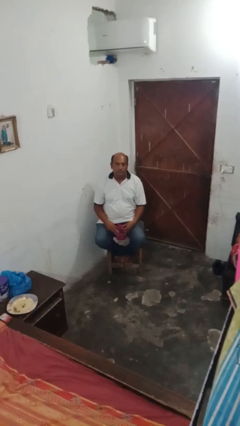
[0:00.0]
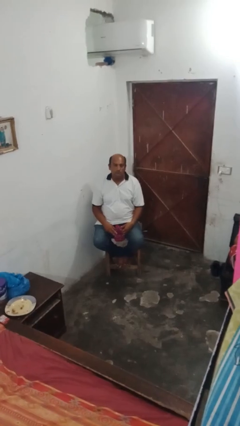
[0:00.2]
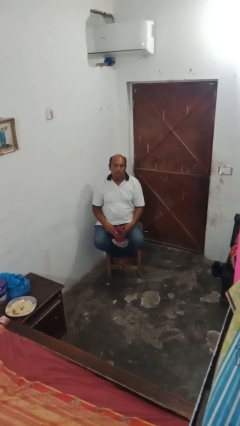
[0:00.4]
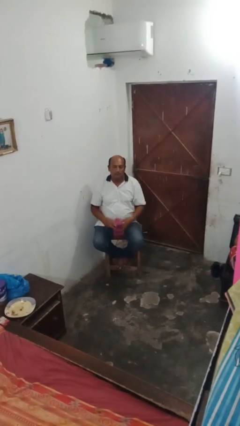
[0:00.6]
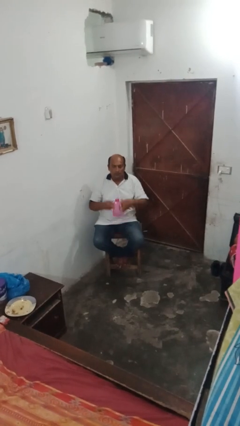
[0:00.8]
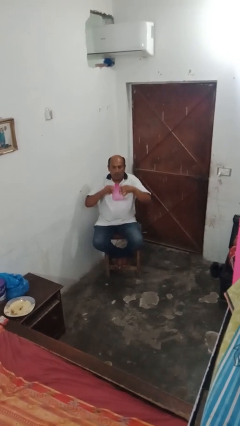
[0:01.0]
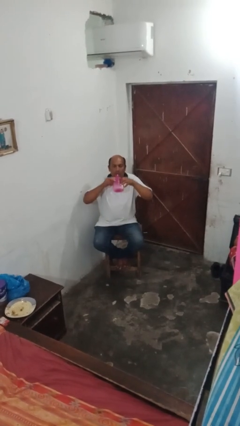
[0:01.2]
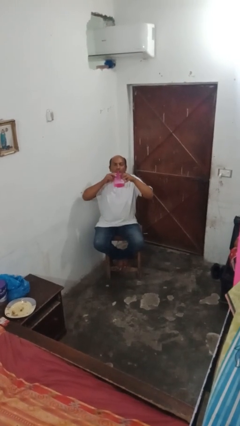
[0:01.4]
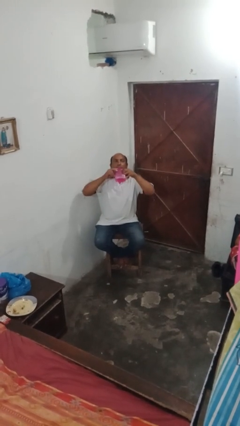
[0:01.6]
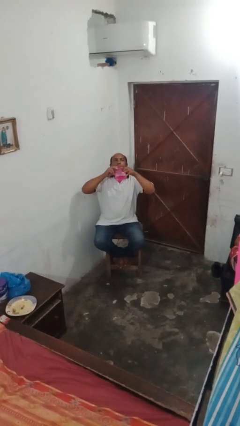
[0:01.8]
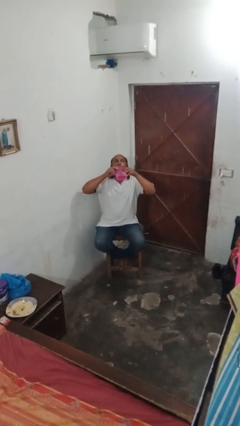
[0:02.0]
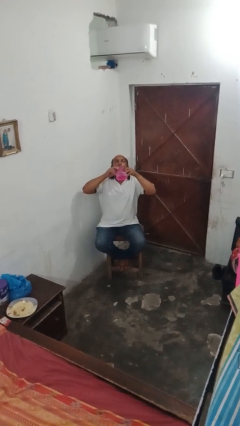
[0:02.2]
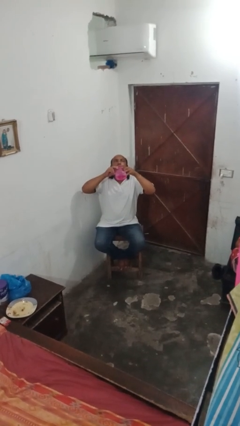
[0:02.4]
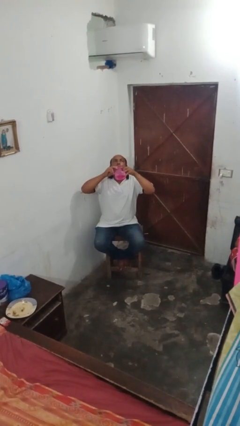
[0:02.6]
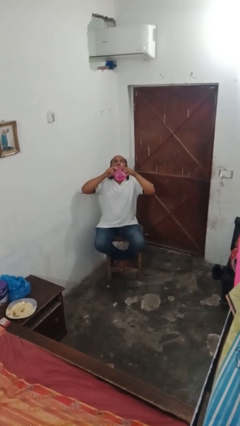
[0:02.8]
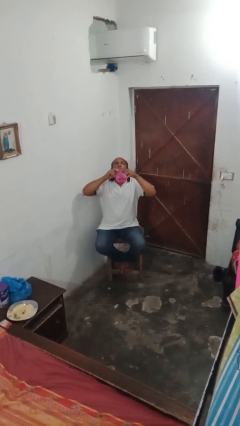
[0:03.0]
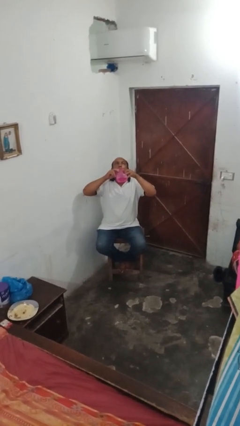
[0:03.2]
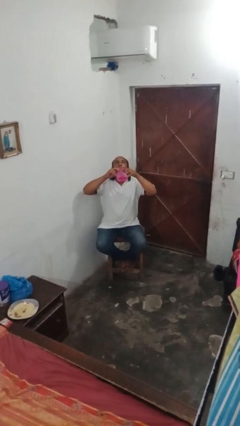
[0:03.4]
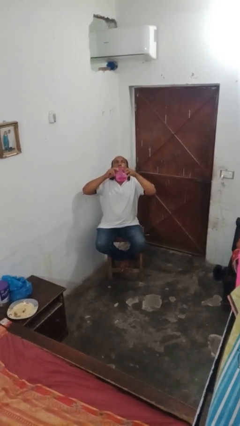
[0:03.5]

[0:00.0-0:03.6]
person drinks from bottle

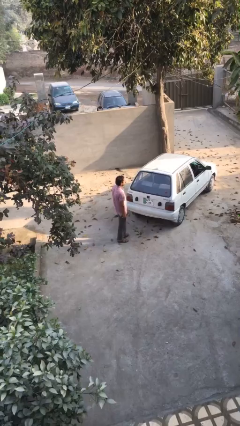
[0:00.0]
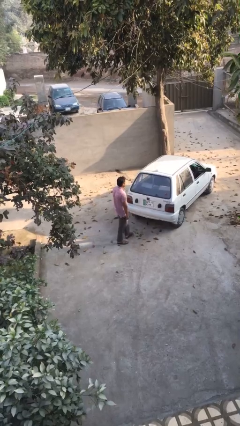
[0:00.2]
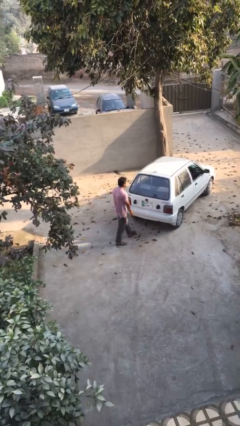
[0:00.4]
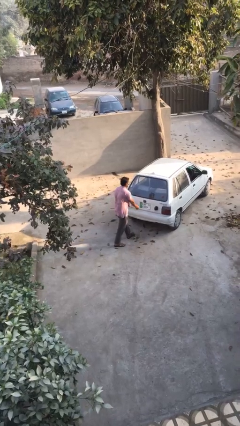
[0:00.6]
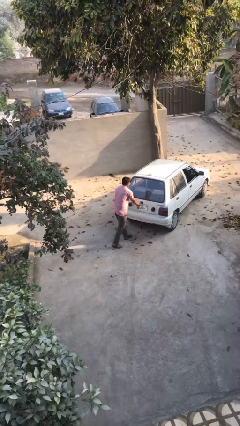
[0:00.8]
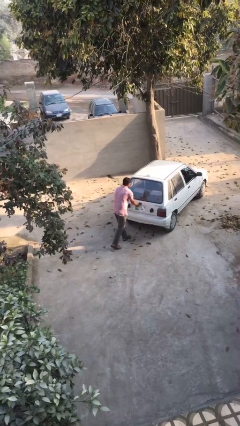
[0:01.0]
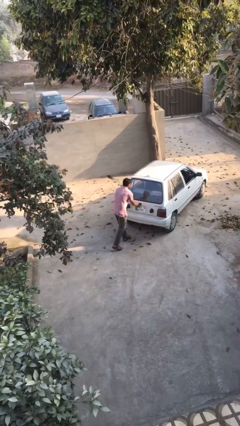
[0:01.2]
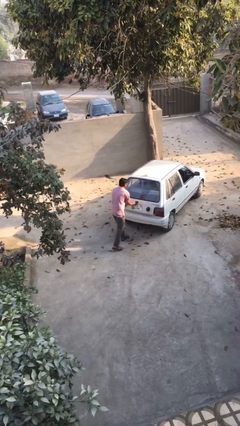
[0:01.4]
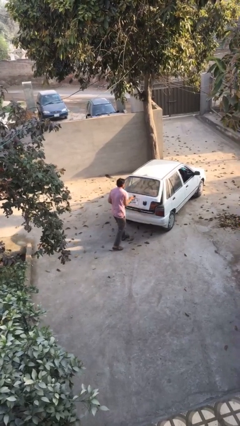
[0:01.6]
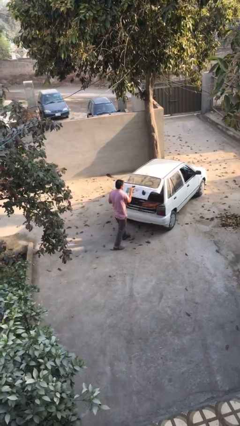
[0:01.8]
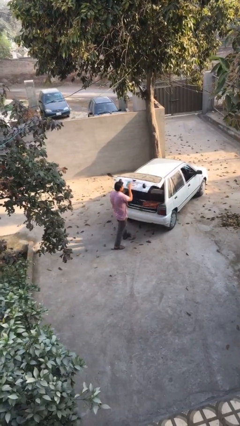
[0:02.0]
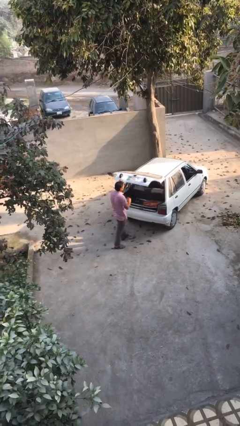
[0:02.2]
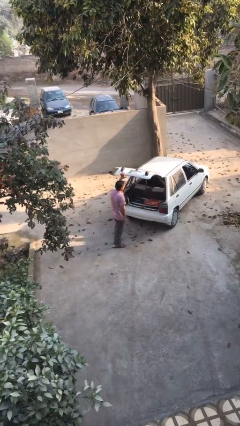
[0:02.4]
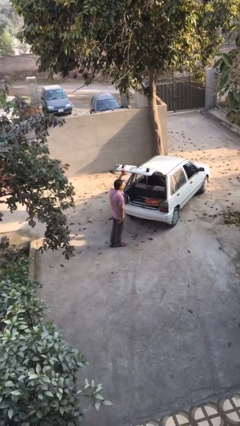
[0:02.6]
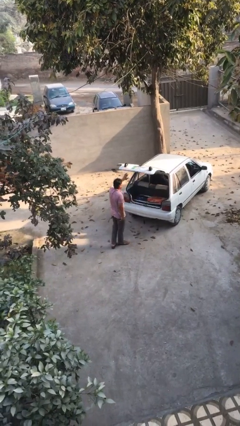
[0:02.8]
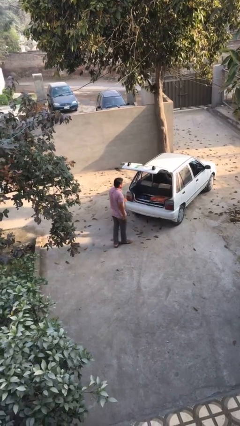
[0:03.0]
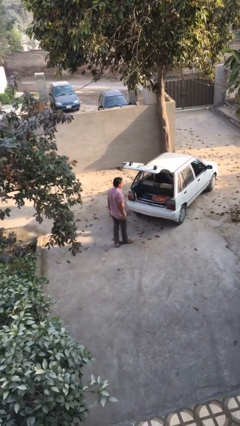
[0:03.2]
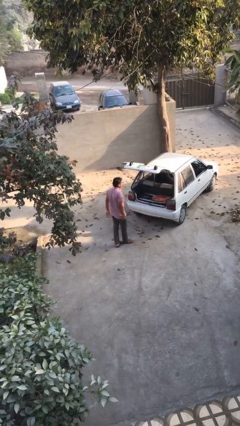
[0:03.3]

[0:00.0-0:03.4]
person opens car trunk

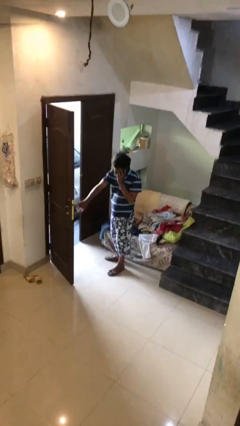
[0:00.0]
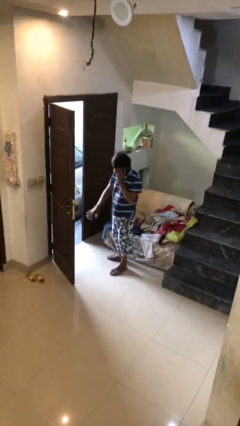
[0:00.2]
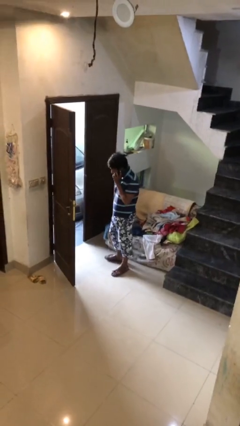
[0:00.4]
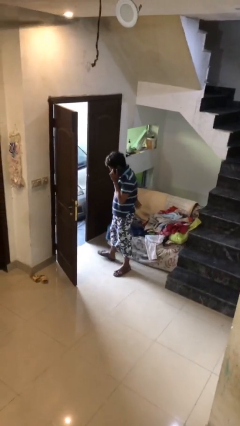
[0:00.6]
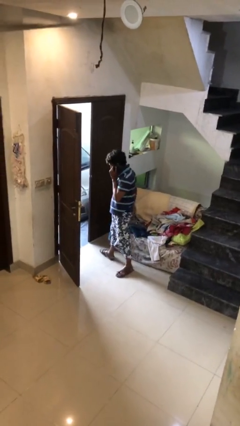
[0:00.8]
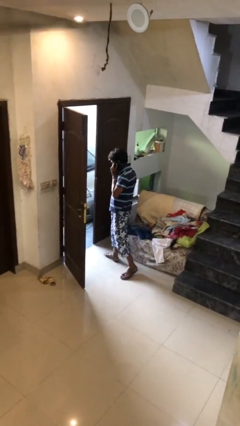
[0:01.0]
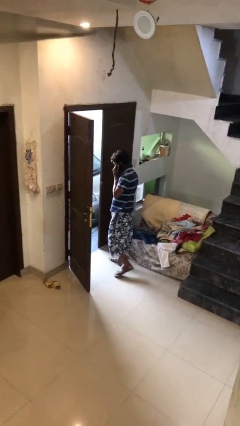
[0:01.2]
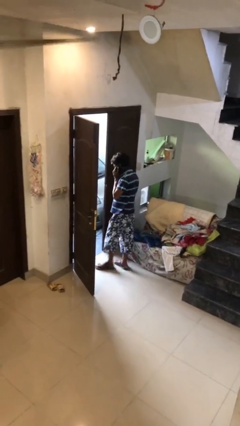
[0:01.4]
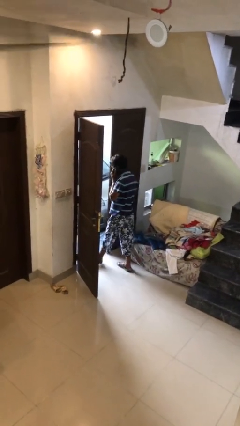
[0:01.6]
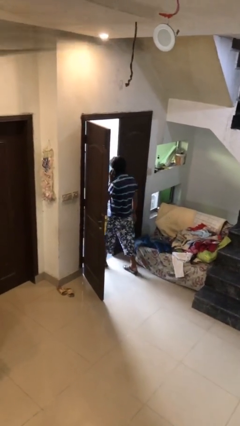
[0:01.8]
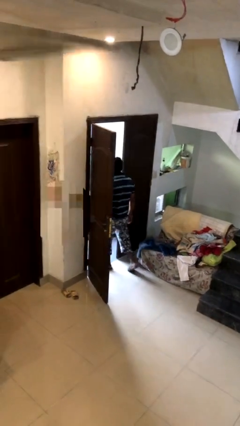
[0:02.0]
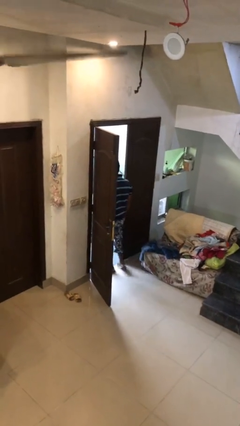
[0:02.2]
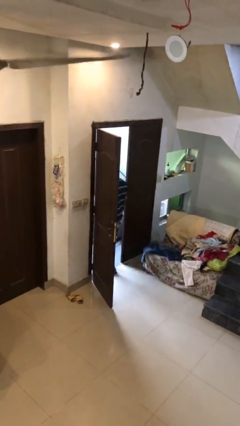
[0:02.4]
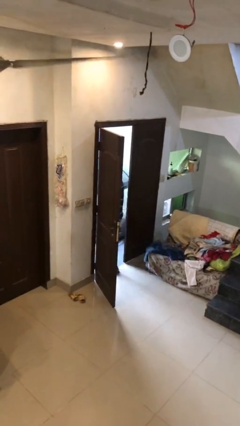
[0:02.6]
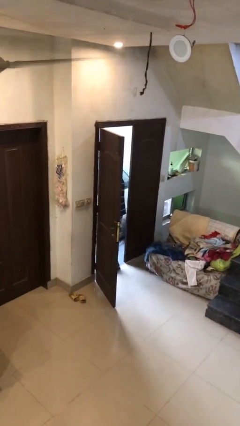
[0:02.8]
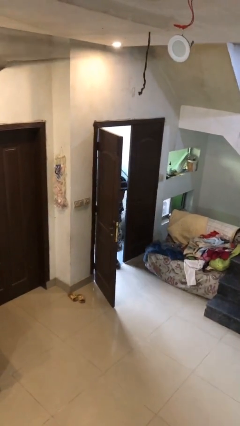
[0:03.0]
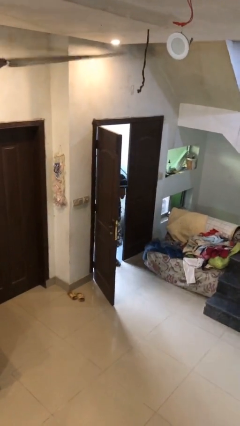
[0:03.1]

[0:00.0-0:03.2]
person exits scene through structure

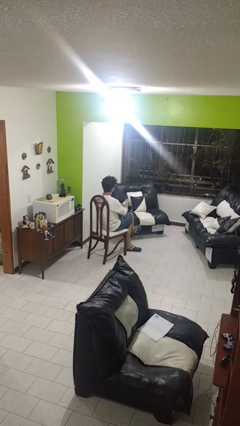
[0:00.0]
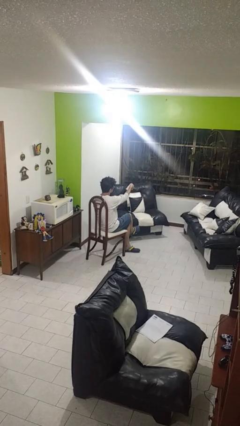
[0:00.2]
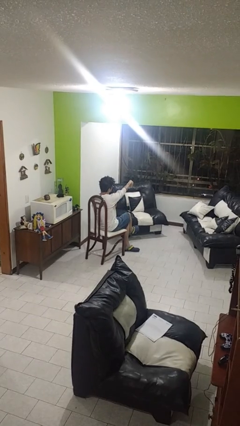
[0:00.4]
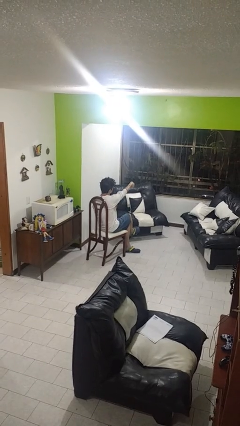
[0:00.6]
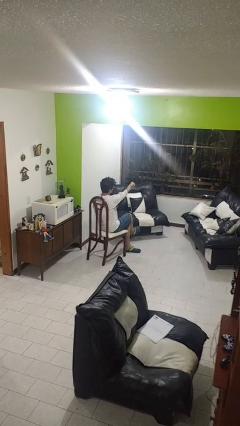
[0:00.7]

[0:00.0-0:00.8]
person uses television remote

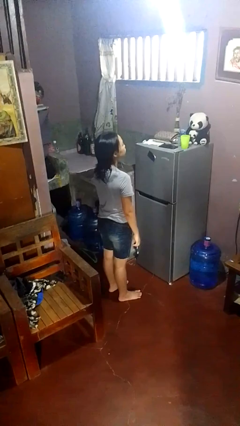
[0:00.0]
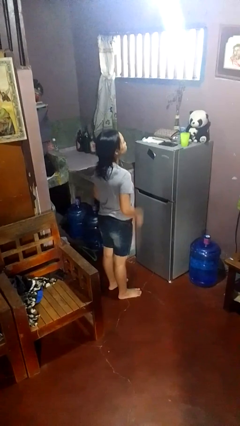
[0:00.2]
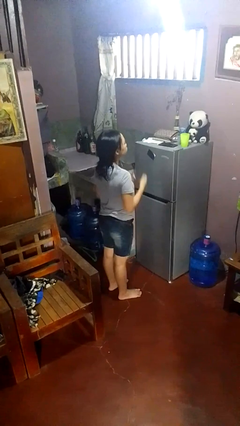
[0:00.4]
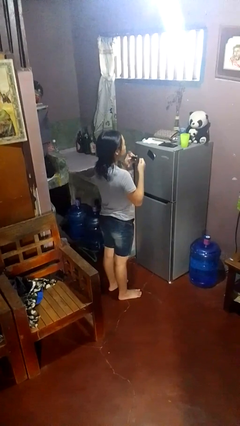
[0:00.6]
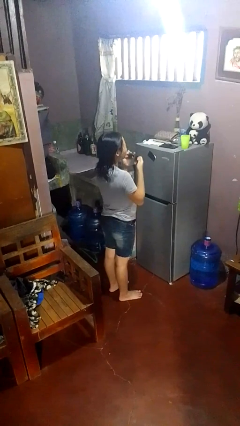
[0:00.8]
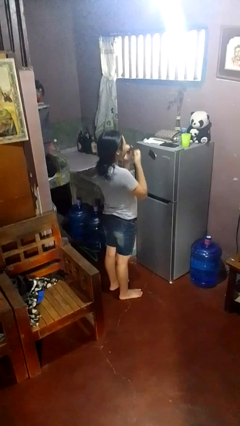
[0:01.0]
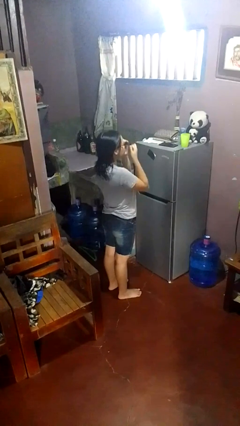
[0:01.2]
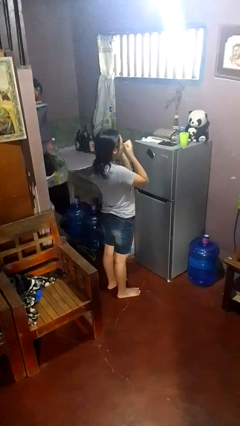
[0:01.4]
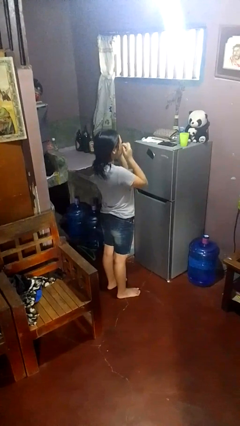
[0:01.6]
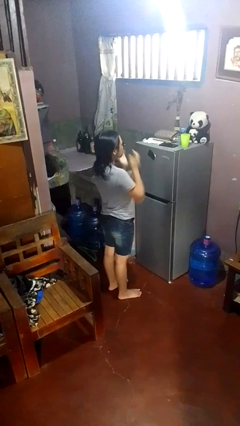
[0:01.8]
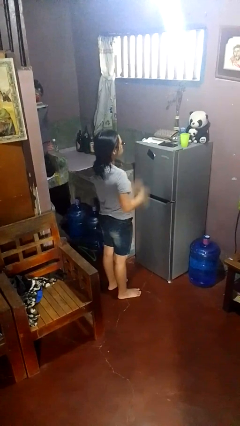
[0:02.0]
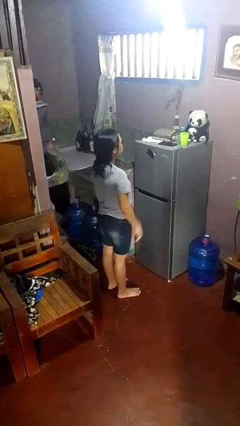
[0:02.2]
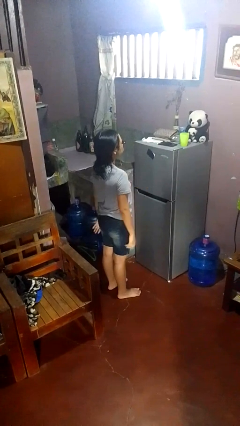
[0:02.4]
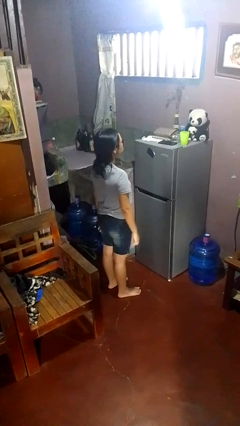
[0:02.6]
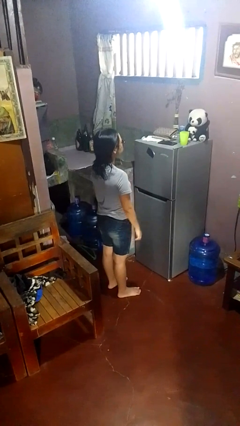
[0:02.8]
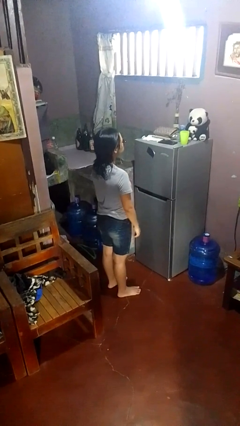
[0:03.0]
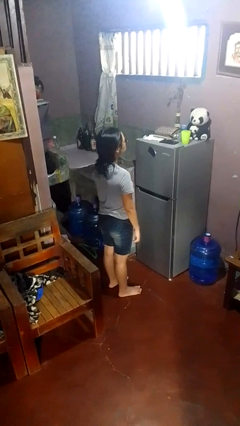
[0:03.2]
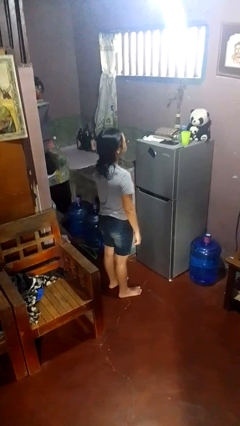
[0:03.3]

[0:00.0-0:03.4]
person puts on sunglasses

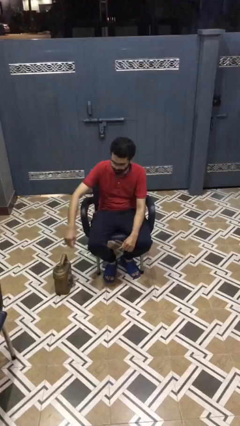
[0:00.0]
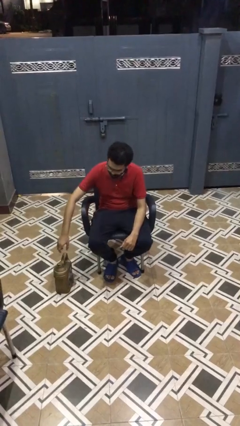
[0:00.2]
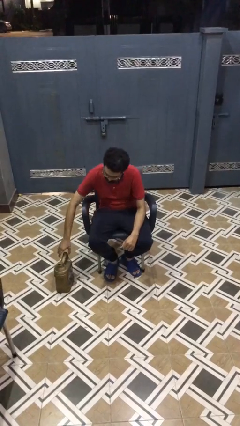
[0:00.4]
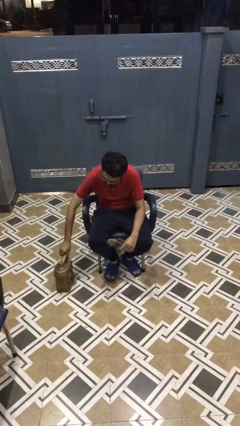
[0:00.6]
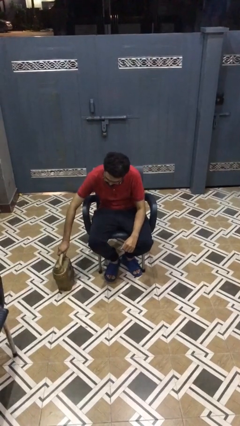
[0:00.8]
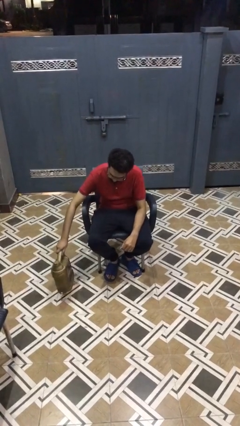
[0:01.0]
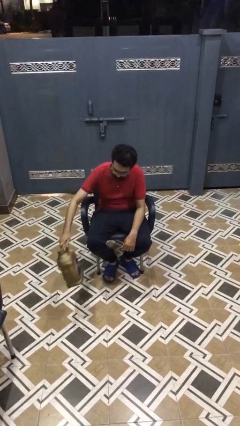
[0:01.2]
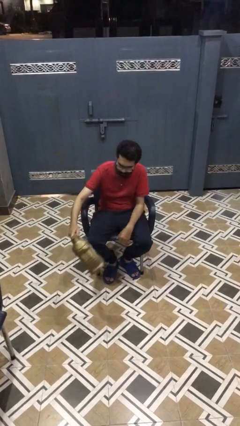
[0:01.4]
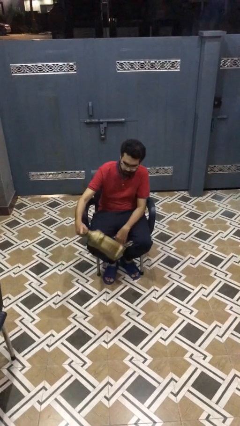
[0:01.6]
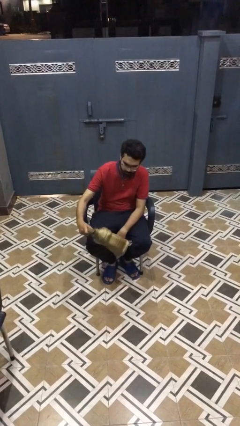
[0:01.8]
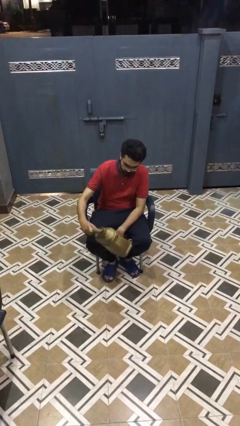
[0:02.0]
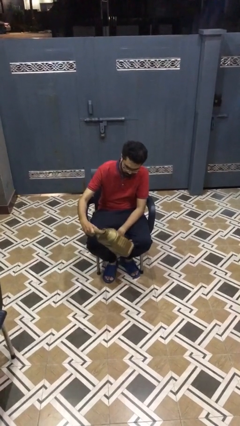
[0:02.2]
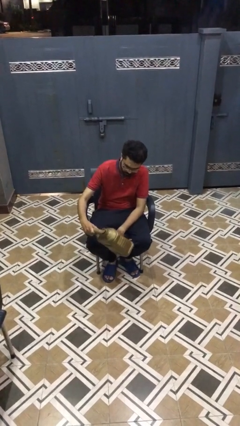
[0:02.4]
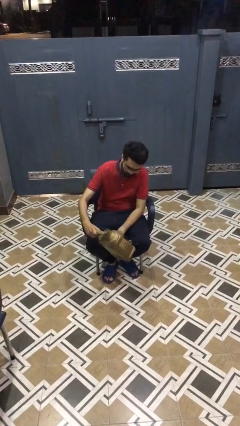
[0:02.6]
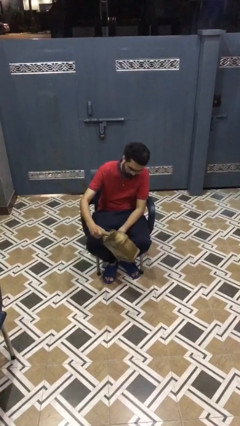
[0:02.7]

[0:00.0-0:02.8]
person picks up object from floor

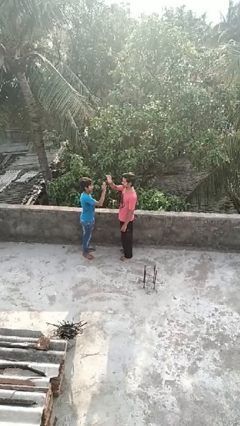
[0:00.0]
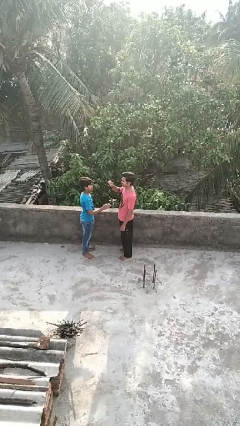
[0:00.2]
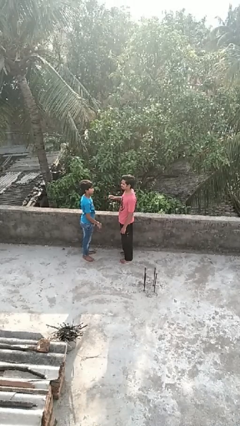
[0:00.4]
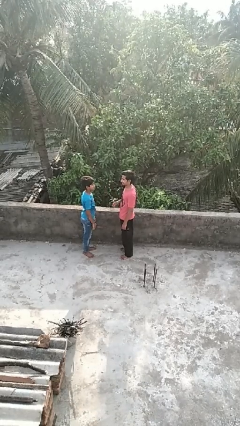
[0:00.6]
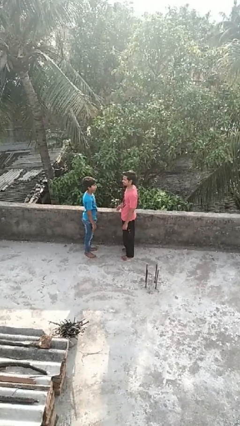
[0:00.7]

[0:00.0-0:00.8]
person highfives hand
